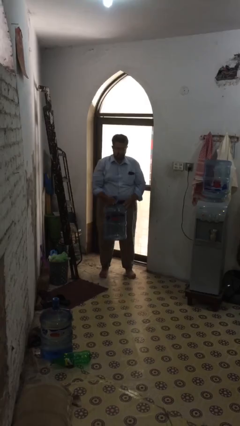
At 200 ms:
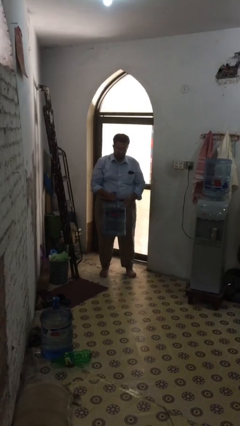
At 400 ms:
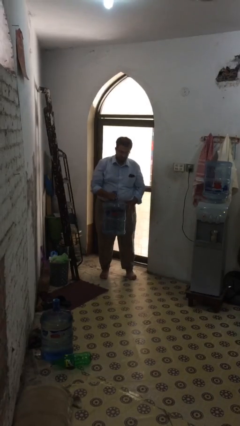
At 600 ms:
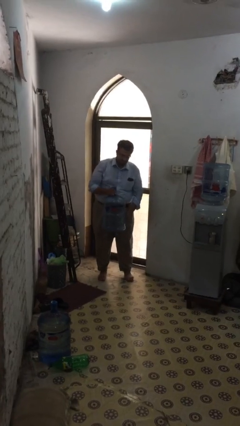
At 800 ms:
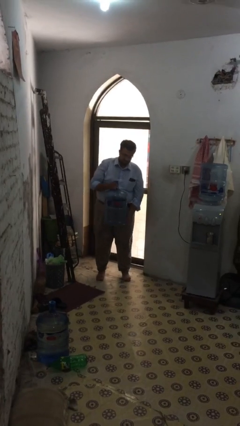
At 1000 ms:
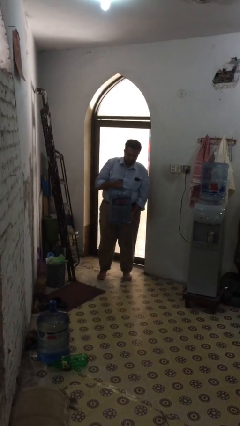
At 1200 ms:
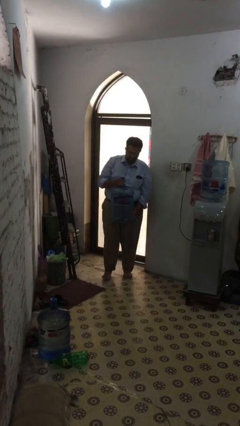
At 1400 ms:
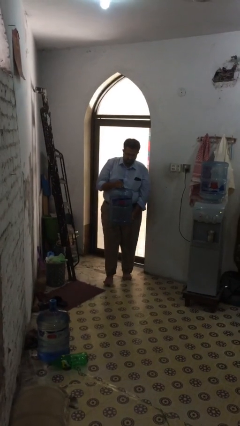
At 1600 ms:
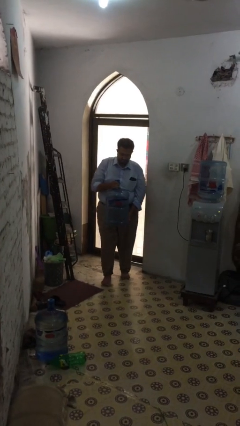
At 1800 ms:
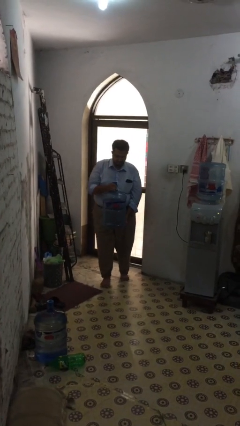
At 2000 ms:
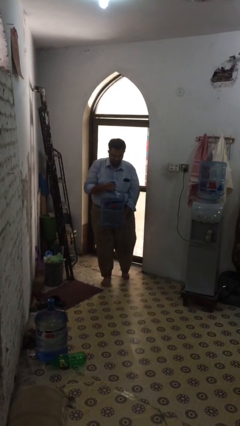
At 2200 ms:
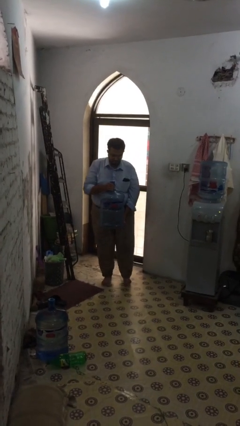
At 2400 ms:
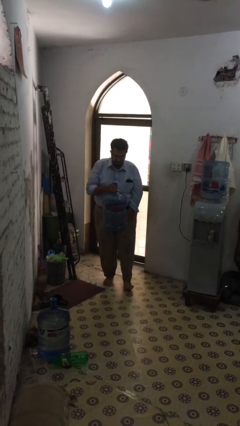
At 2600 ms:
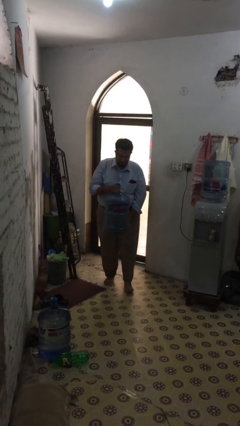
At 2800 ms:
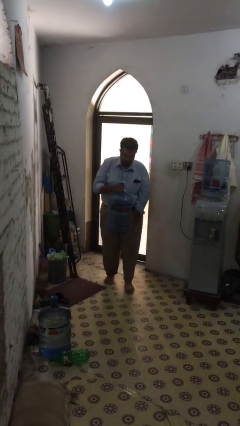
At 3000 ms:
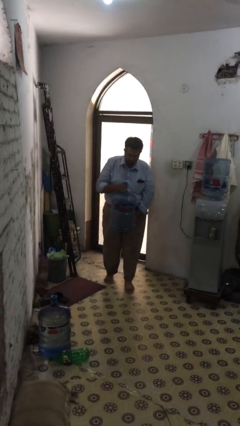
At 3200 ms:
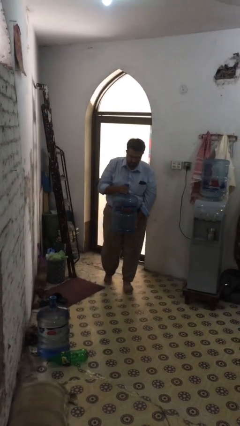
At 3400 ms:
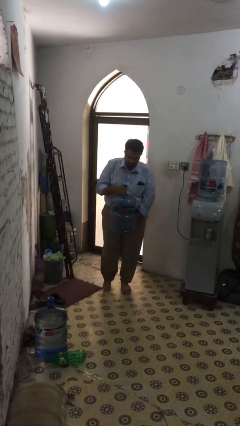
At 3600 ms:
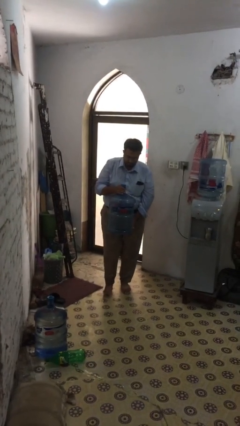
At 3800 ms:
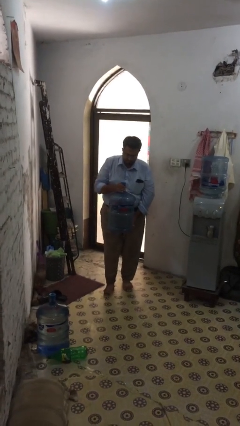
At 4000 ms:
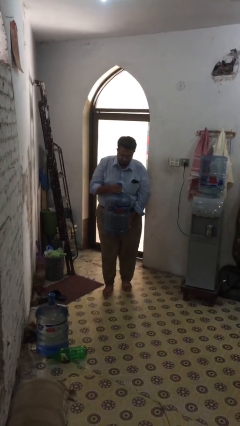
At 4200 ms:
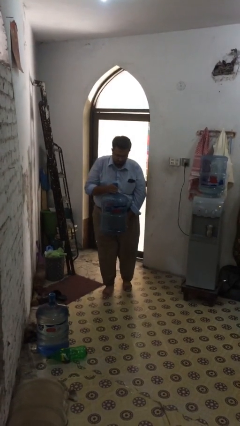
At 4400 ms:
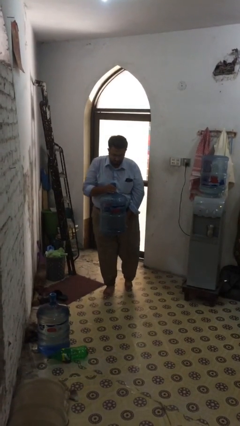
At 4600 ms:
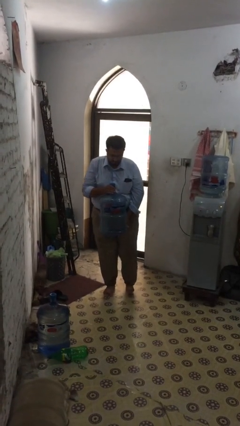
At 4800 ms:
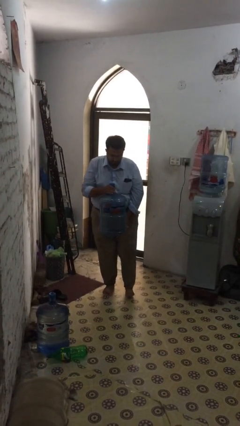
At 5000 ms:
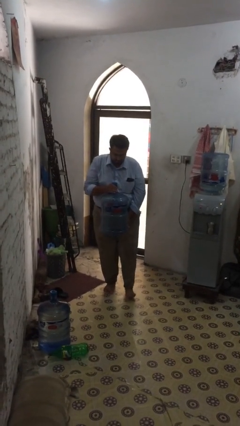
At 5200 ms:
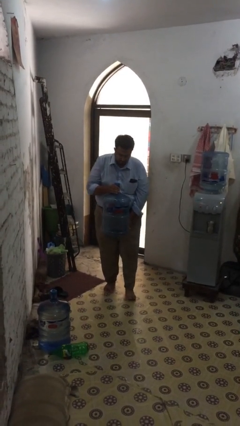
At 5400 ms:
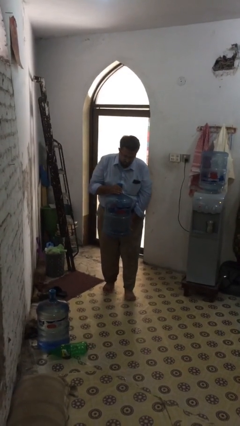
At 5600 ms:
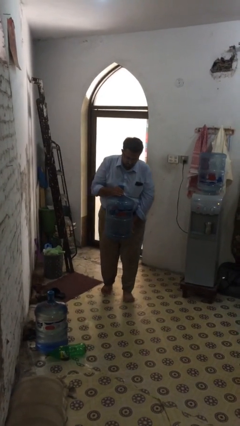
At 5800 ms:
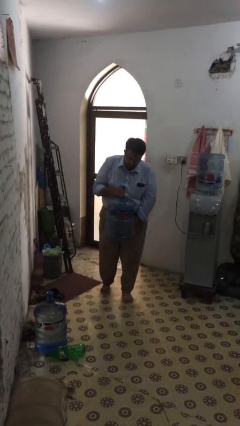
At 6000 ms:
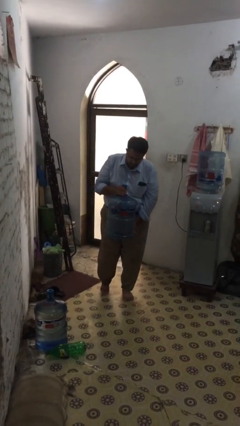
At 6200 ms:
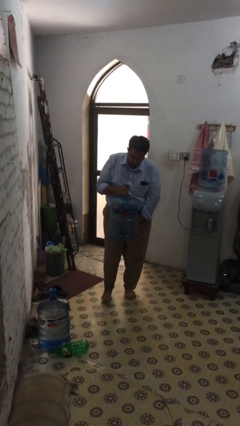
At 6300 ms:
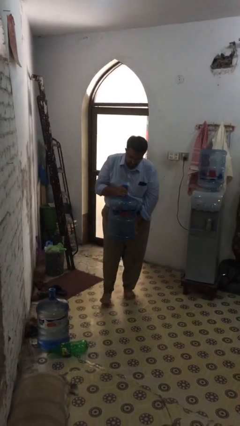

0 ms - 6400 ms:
person carries heavy object

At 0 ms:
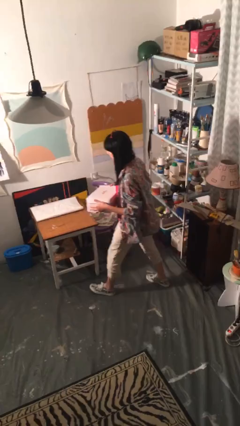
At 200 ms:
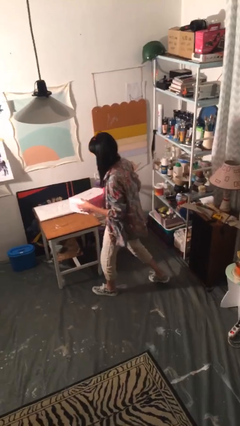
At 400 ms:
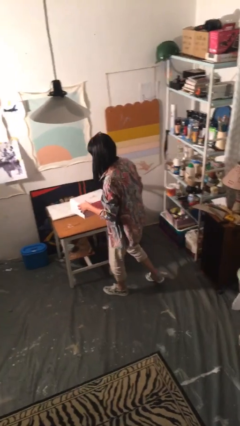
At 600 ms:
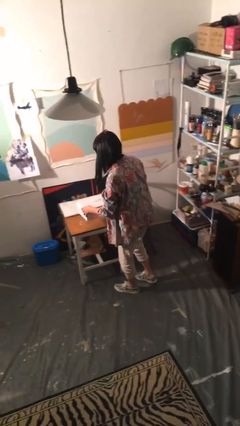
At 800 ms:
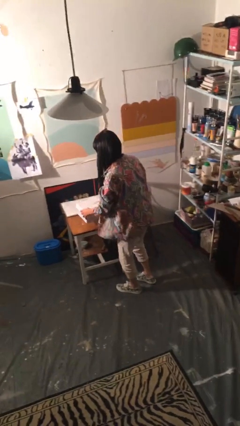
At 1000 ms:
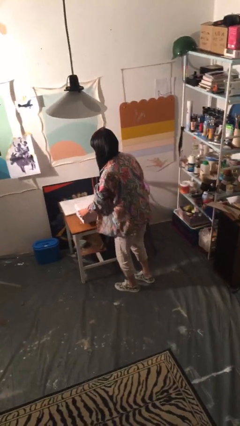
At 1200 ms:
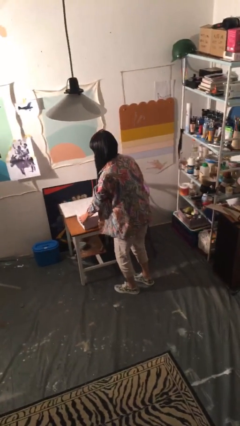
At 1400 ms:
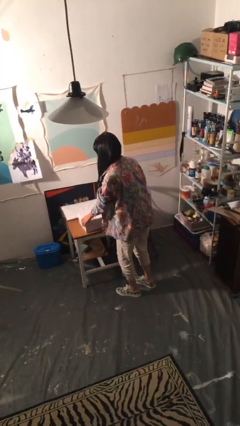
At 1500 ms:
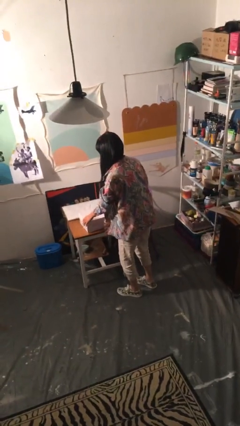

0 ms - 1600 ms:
person puts down object on table

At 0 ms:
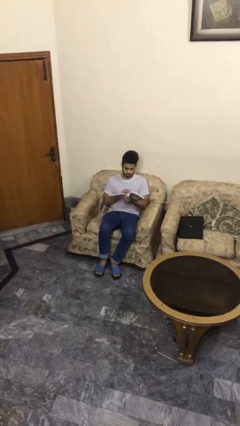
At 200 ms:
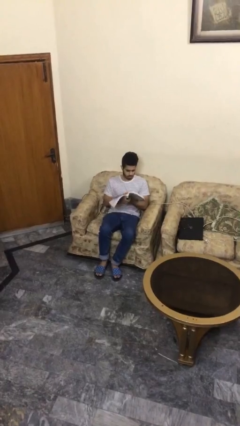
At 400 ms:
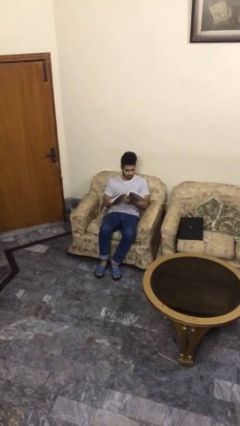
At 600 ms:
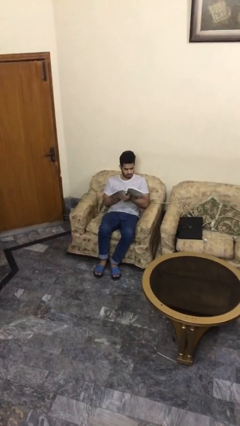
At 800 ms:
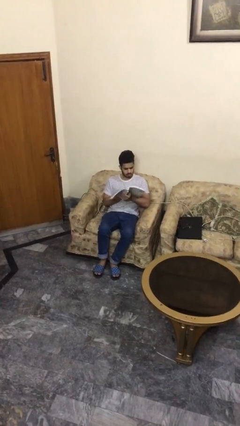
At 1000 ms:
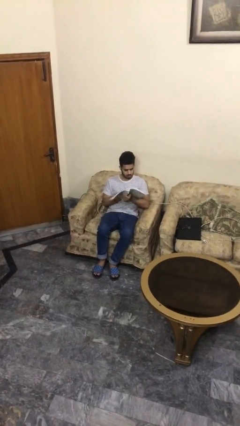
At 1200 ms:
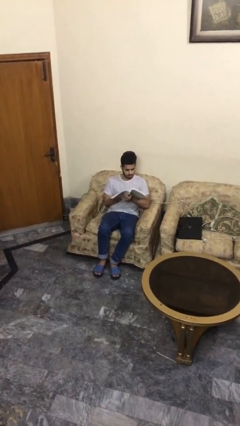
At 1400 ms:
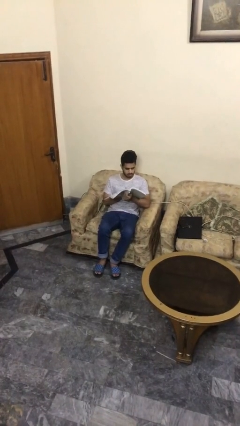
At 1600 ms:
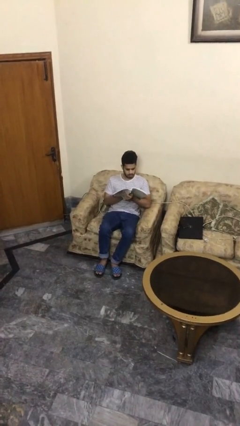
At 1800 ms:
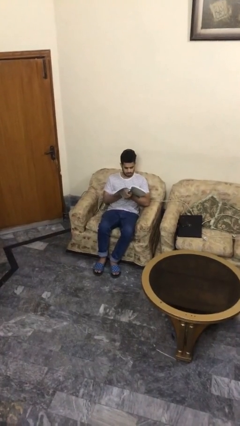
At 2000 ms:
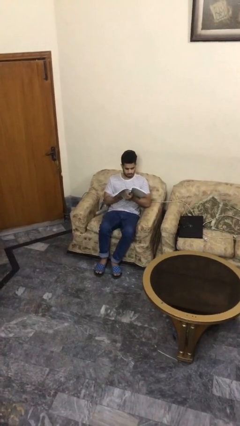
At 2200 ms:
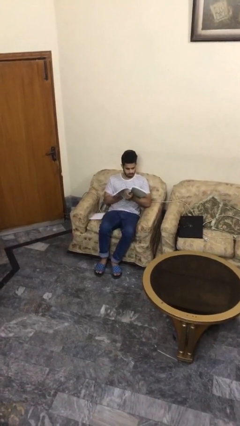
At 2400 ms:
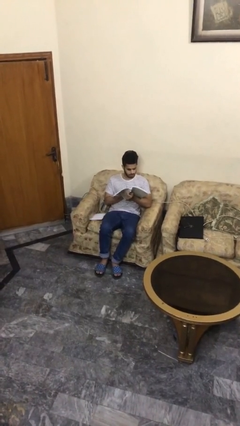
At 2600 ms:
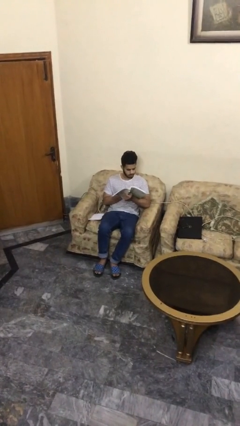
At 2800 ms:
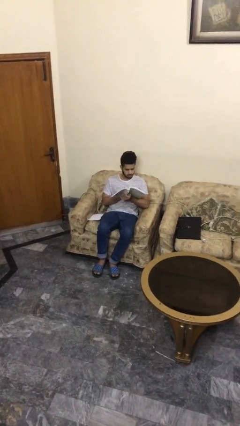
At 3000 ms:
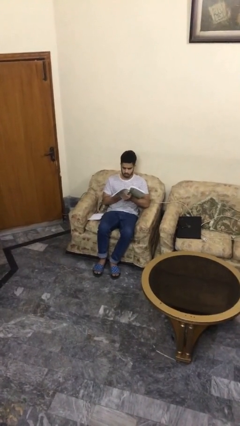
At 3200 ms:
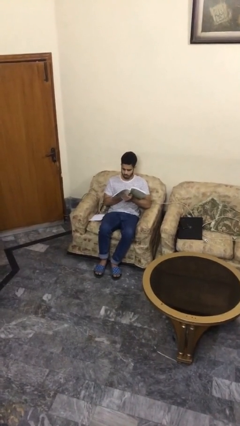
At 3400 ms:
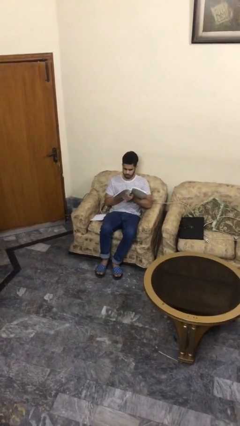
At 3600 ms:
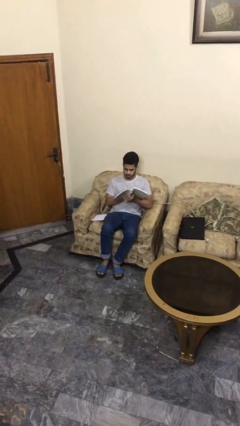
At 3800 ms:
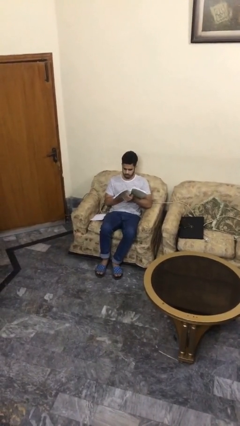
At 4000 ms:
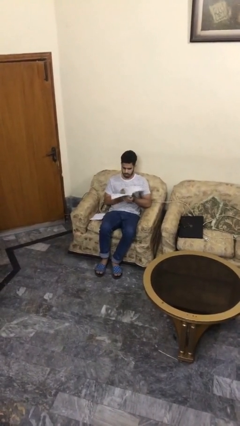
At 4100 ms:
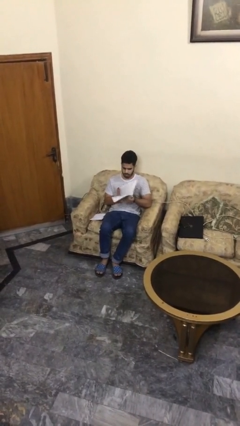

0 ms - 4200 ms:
person reads document

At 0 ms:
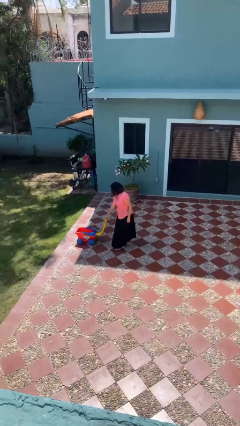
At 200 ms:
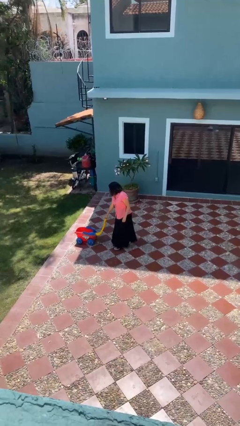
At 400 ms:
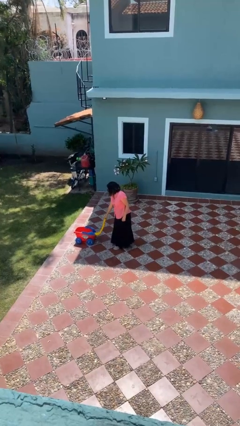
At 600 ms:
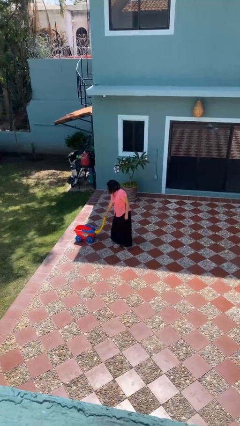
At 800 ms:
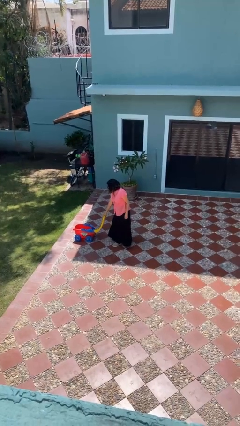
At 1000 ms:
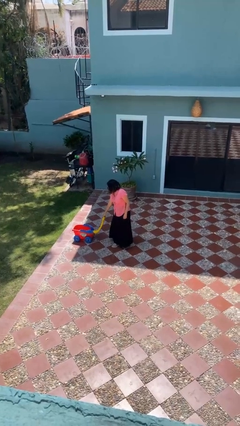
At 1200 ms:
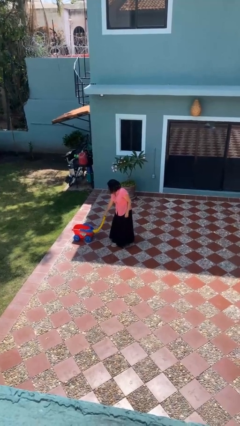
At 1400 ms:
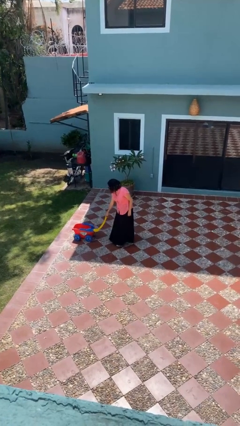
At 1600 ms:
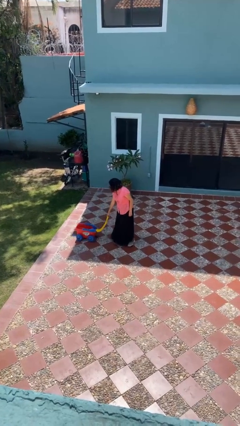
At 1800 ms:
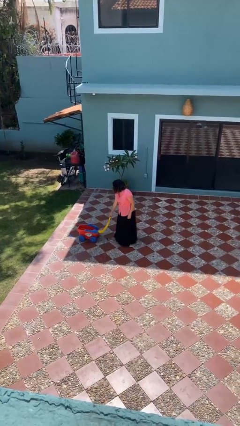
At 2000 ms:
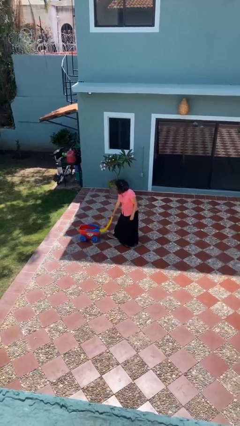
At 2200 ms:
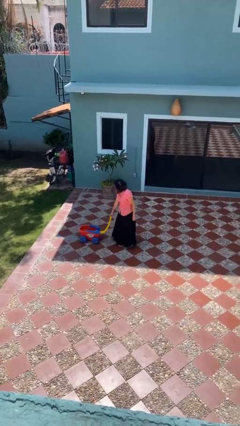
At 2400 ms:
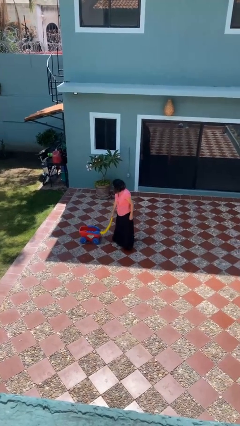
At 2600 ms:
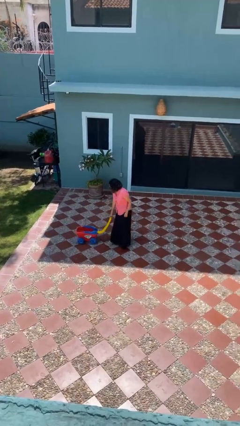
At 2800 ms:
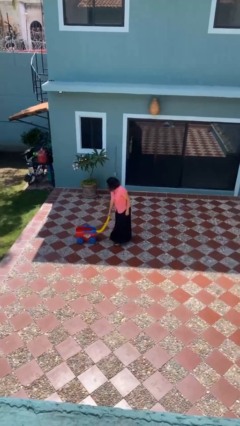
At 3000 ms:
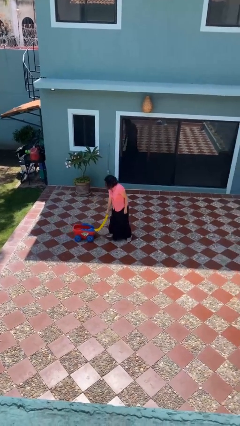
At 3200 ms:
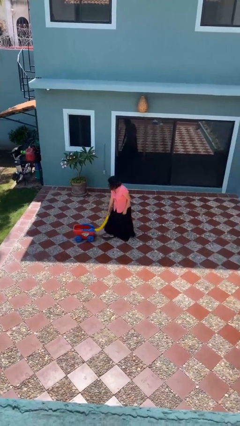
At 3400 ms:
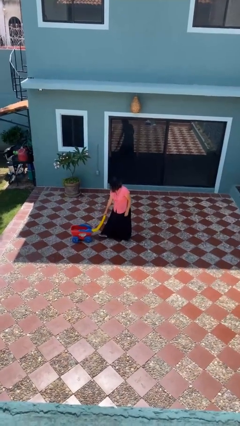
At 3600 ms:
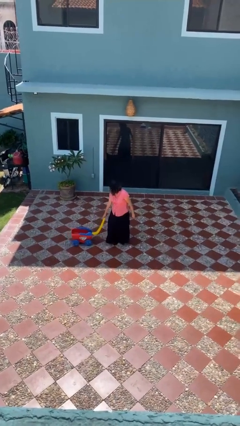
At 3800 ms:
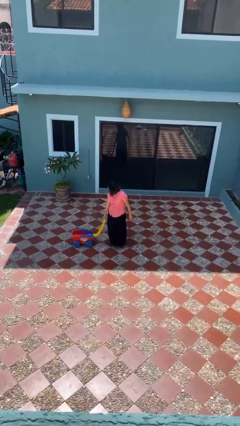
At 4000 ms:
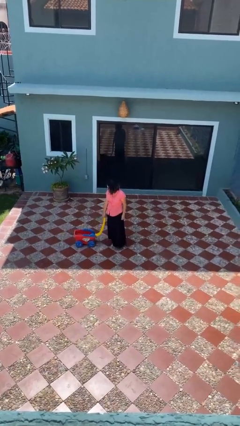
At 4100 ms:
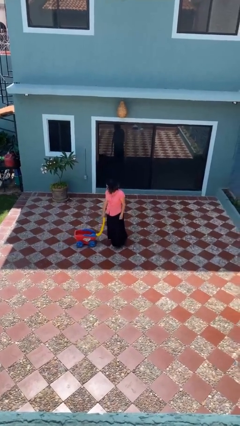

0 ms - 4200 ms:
person pulls wheeled cart

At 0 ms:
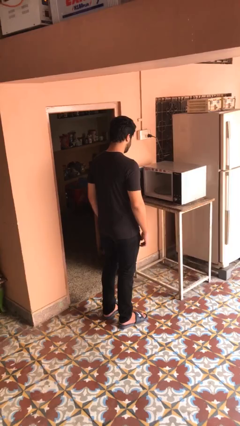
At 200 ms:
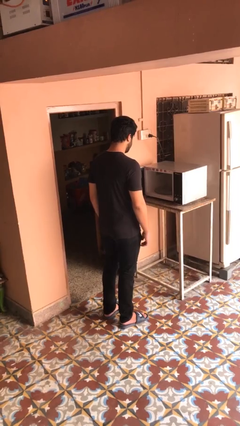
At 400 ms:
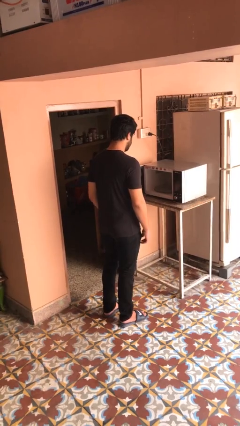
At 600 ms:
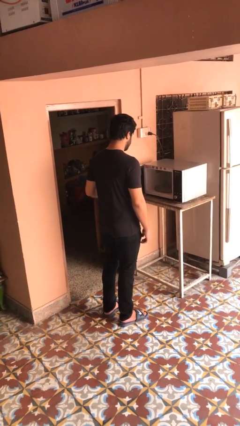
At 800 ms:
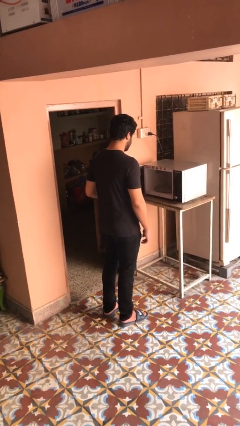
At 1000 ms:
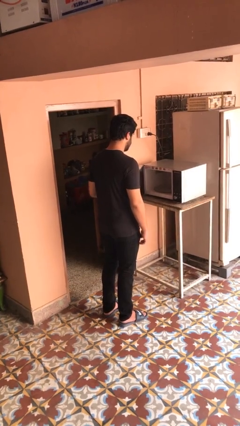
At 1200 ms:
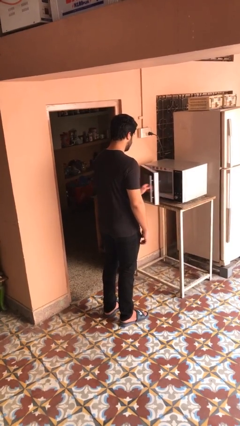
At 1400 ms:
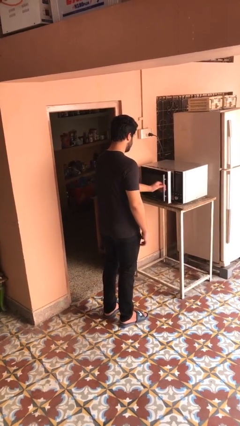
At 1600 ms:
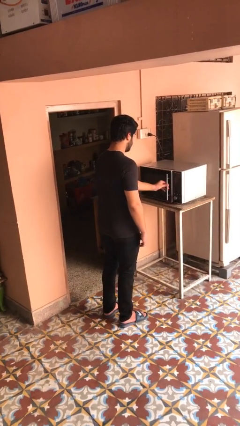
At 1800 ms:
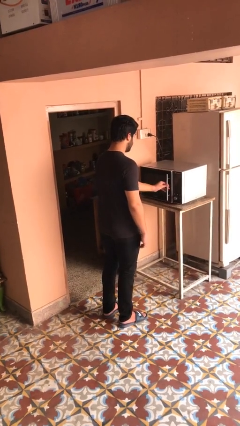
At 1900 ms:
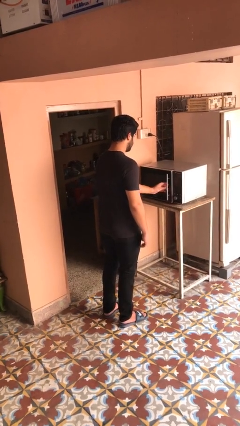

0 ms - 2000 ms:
person closes microwave
